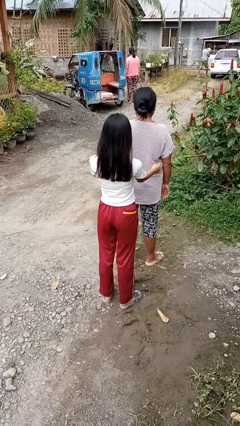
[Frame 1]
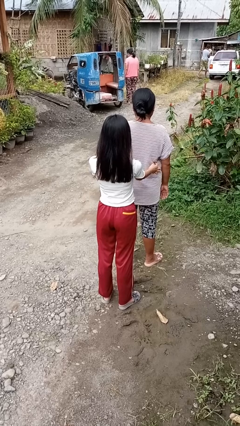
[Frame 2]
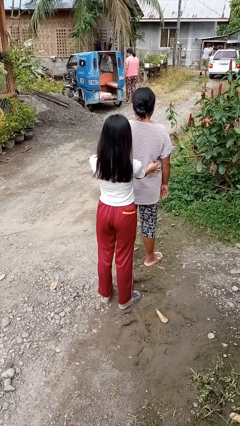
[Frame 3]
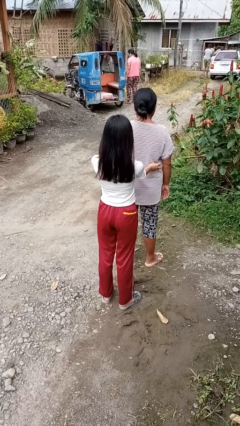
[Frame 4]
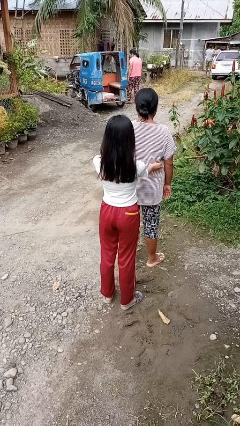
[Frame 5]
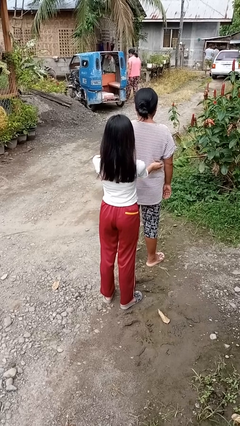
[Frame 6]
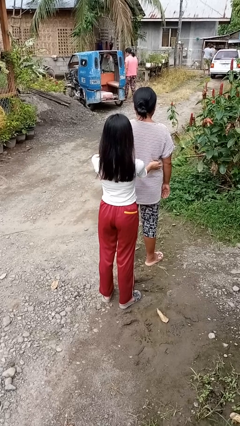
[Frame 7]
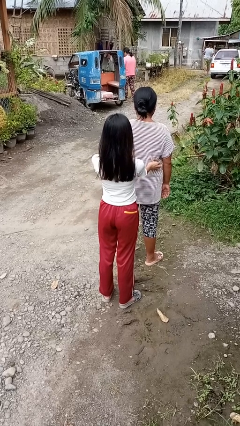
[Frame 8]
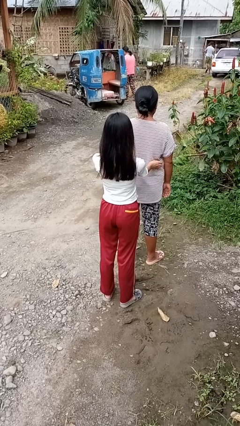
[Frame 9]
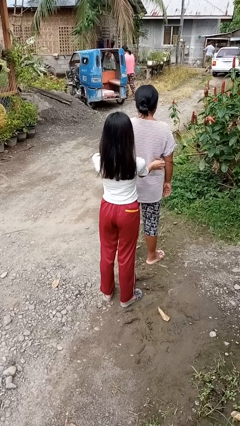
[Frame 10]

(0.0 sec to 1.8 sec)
person tickles person

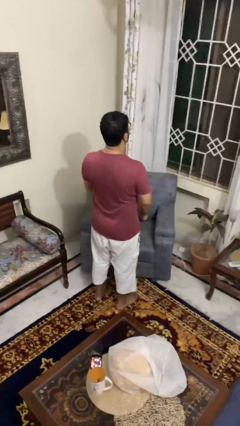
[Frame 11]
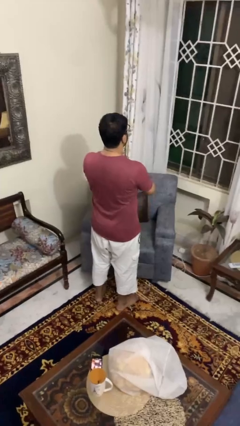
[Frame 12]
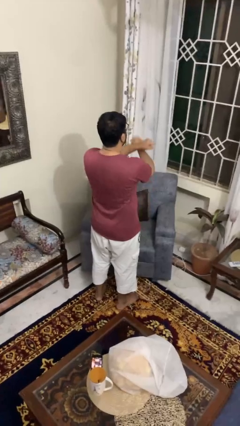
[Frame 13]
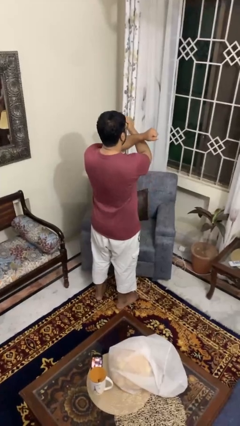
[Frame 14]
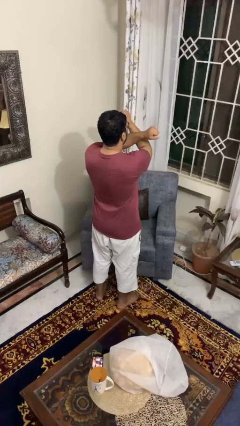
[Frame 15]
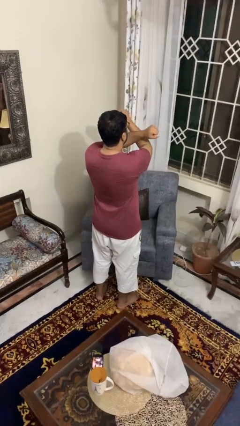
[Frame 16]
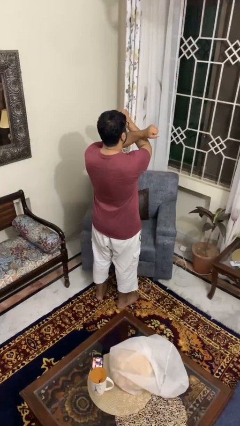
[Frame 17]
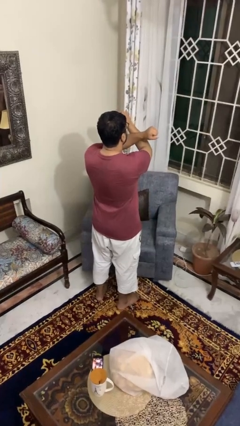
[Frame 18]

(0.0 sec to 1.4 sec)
person gestures arms x

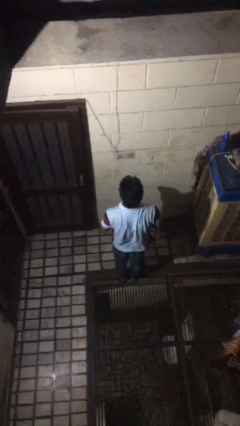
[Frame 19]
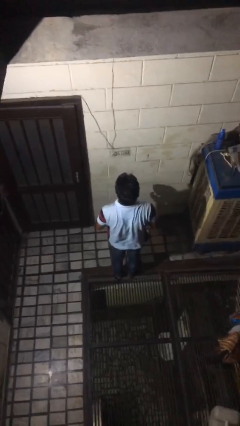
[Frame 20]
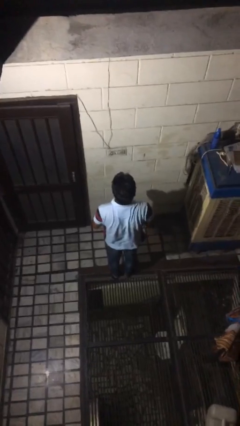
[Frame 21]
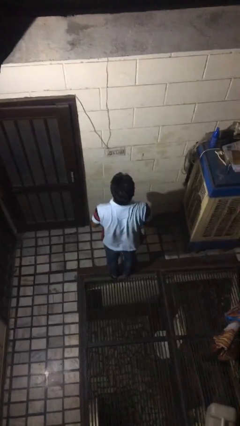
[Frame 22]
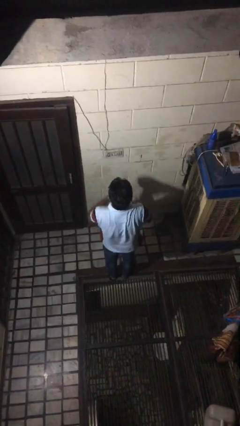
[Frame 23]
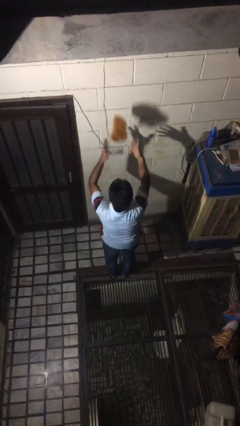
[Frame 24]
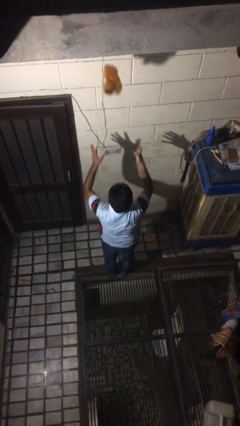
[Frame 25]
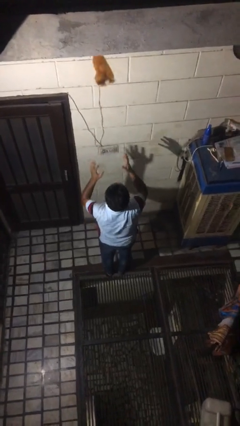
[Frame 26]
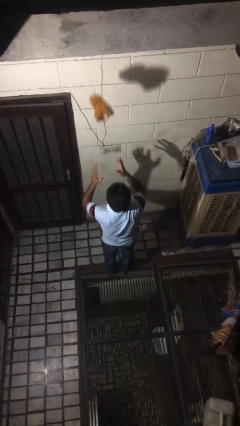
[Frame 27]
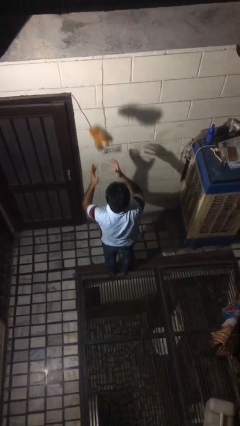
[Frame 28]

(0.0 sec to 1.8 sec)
person drops object

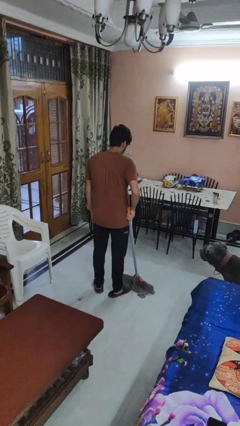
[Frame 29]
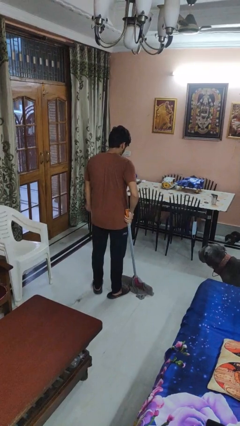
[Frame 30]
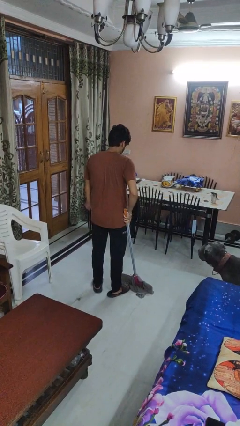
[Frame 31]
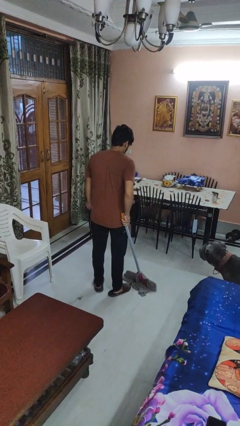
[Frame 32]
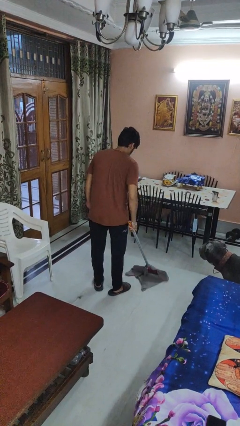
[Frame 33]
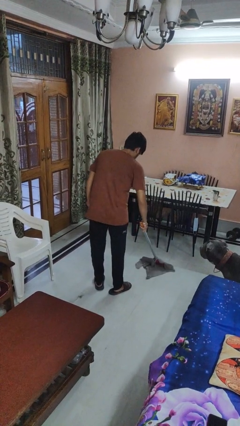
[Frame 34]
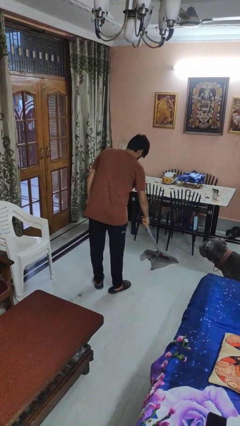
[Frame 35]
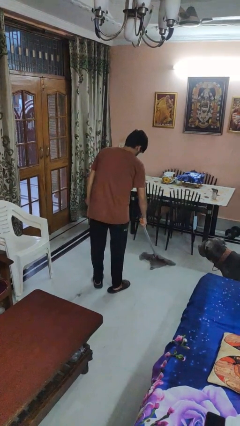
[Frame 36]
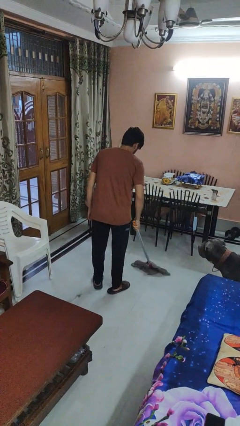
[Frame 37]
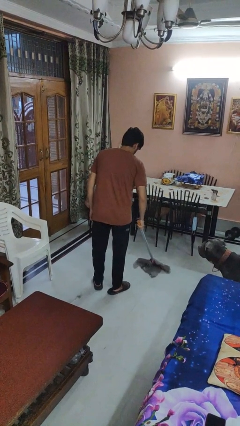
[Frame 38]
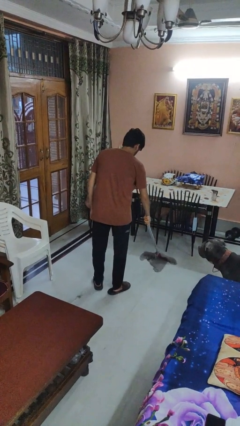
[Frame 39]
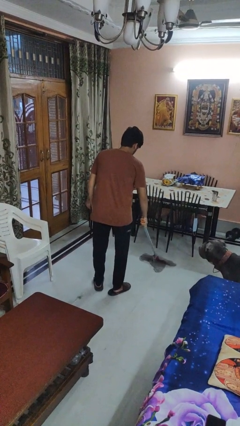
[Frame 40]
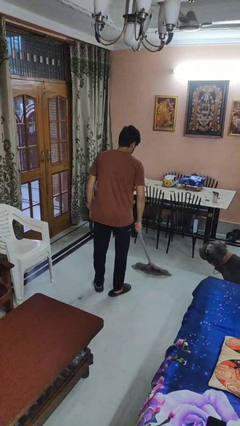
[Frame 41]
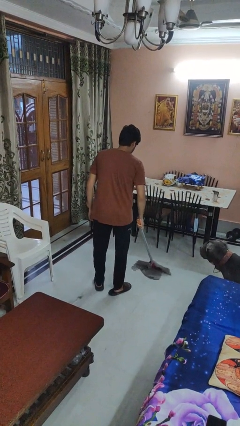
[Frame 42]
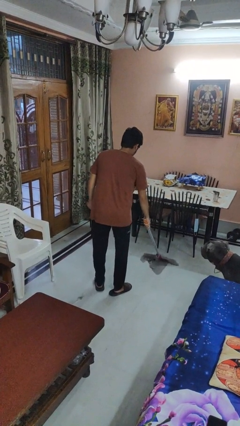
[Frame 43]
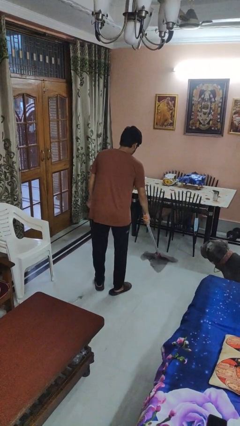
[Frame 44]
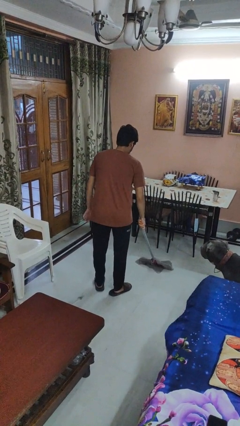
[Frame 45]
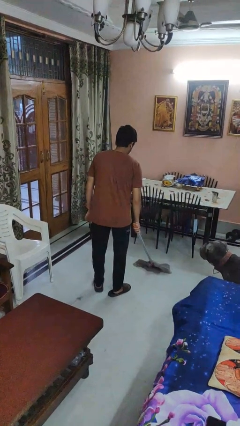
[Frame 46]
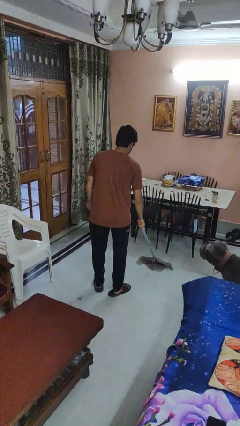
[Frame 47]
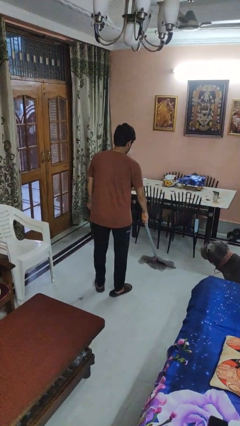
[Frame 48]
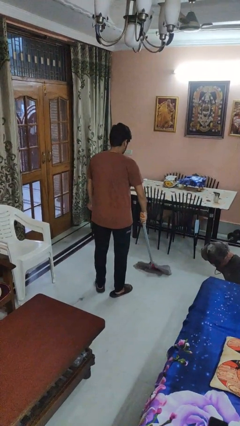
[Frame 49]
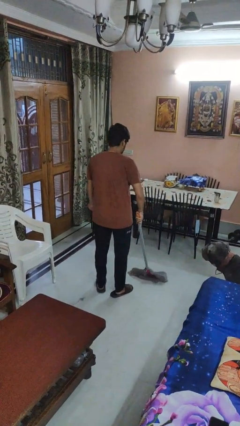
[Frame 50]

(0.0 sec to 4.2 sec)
person mops

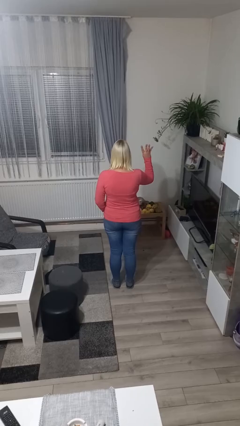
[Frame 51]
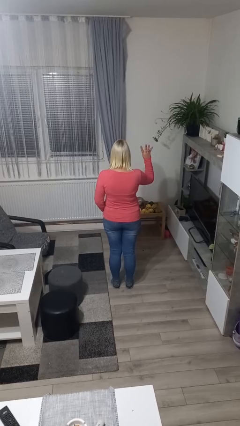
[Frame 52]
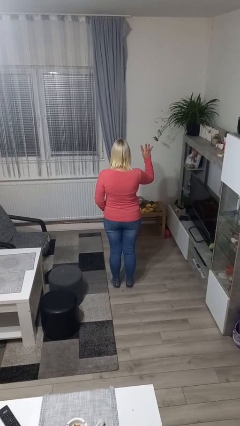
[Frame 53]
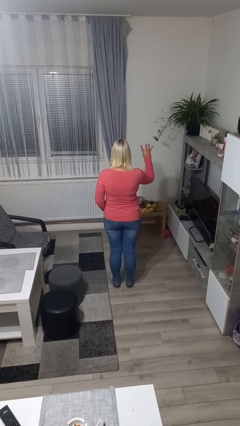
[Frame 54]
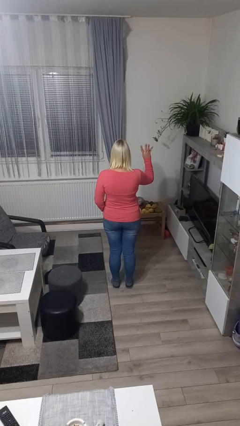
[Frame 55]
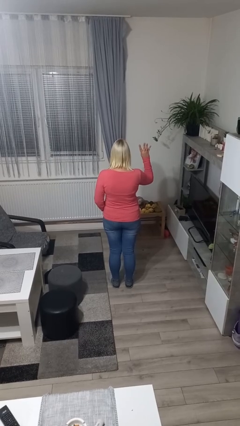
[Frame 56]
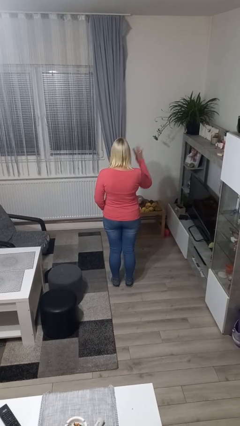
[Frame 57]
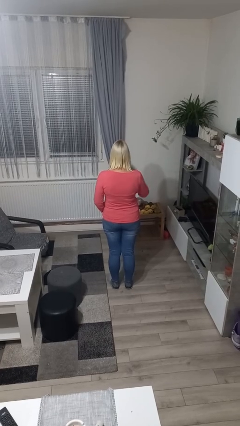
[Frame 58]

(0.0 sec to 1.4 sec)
person gestures number four

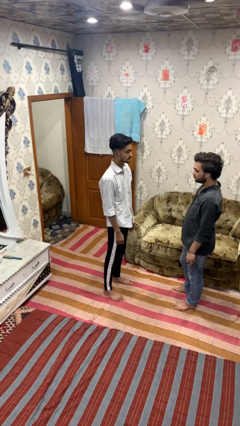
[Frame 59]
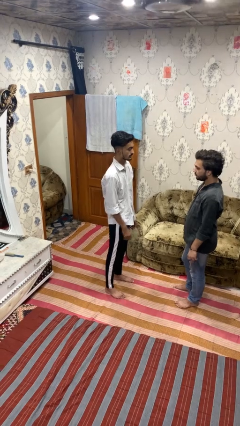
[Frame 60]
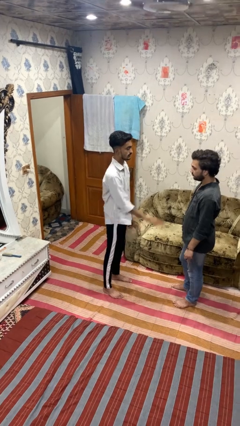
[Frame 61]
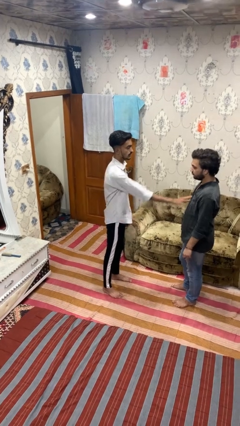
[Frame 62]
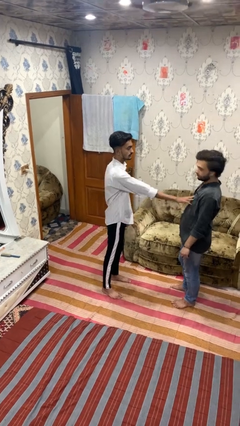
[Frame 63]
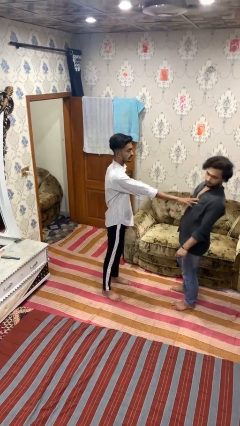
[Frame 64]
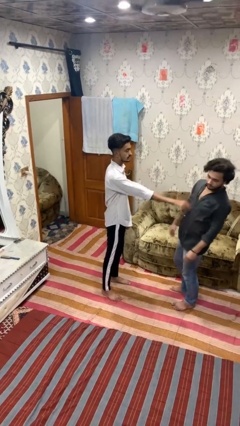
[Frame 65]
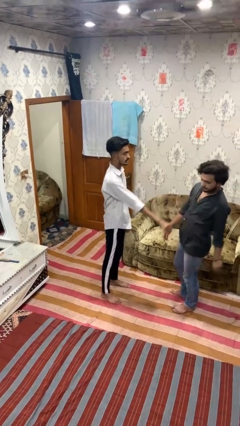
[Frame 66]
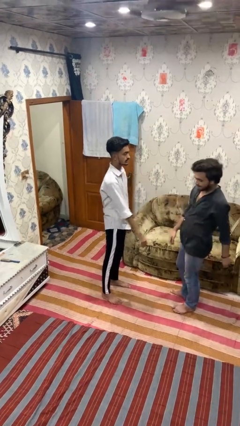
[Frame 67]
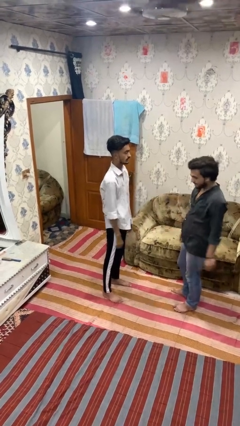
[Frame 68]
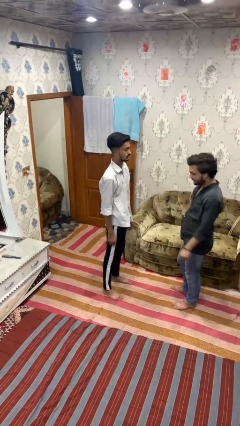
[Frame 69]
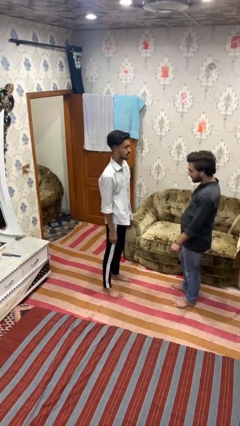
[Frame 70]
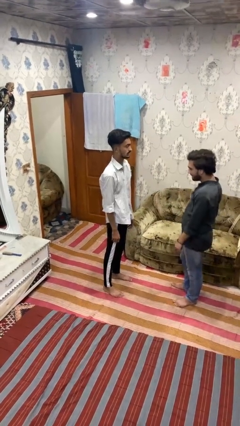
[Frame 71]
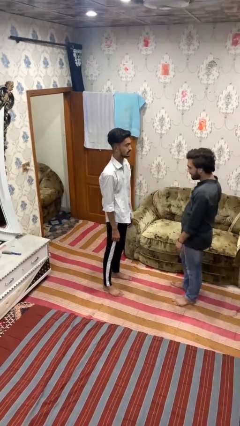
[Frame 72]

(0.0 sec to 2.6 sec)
person shoves person

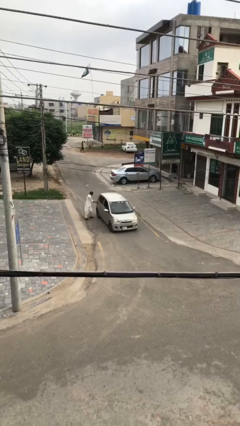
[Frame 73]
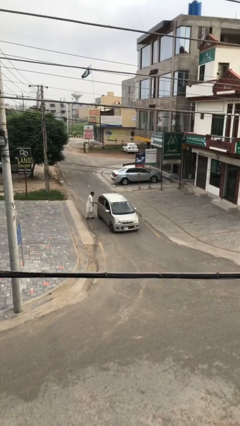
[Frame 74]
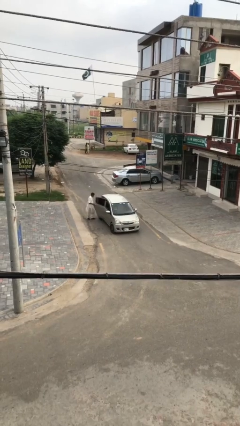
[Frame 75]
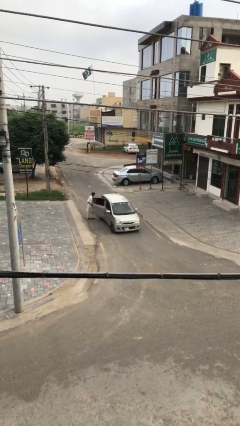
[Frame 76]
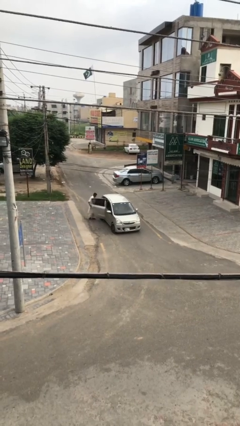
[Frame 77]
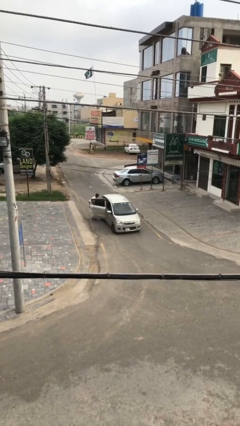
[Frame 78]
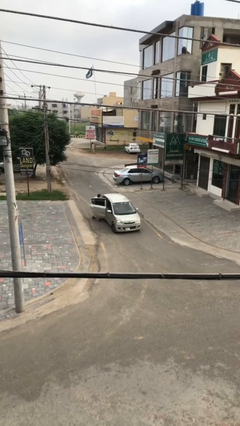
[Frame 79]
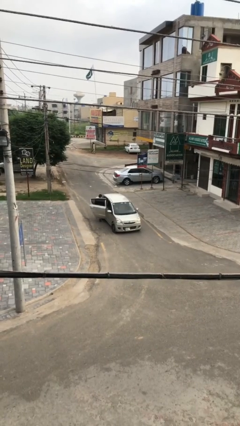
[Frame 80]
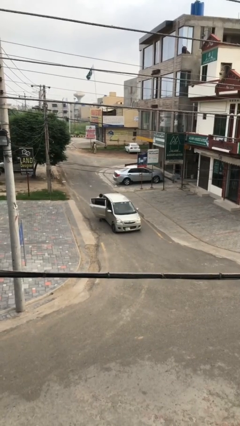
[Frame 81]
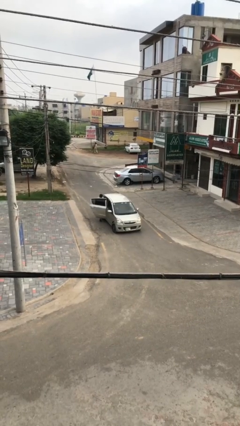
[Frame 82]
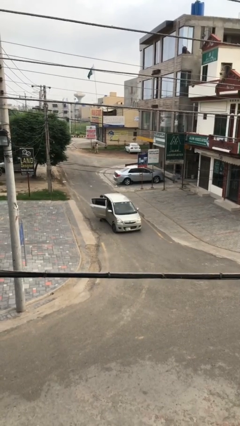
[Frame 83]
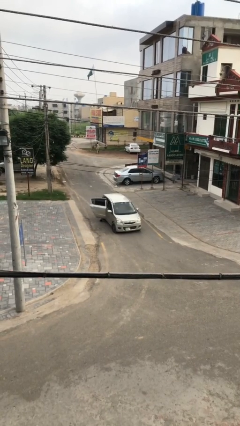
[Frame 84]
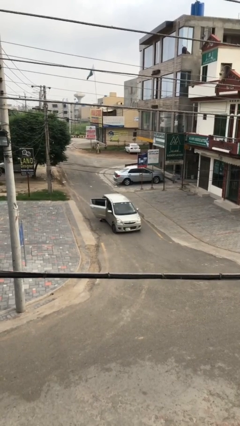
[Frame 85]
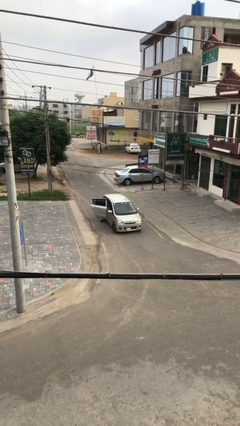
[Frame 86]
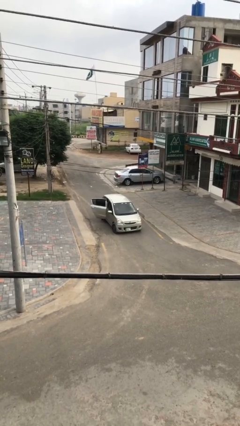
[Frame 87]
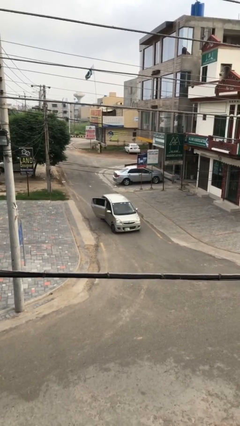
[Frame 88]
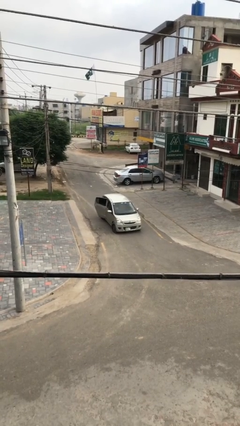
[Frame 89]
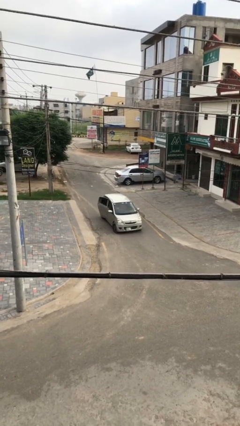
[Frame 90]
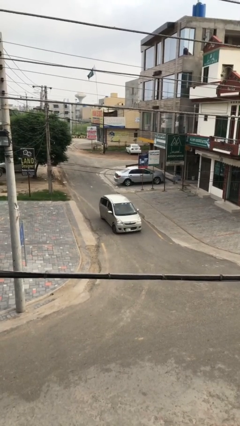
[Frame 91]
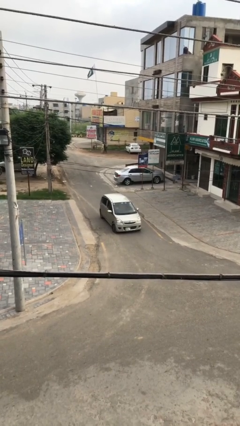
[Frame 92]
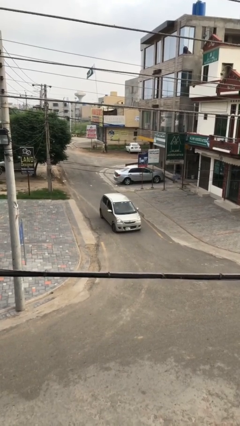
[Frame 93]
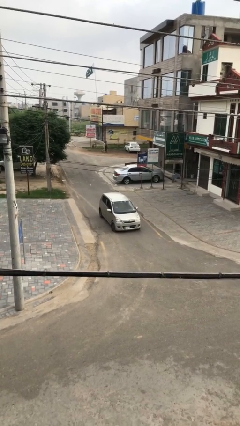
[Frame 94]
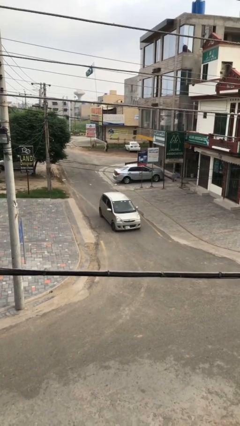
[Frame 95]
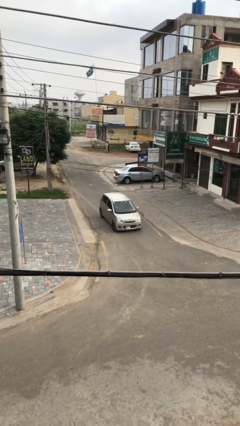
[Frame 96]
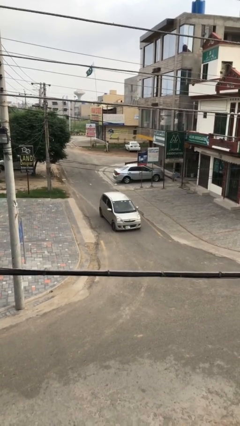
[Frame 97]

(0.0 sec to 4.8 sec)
car picks up person
